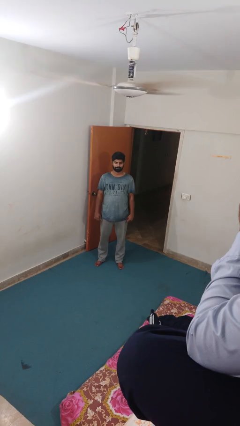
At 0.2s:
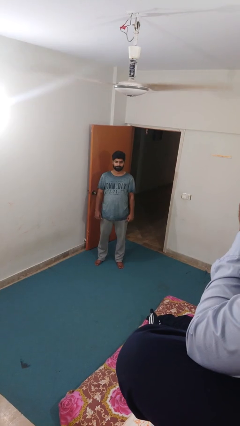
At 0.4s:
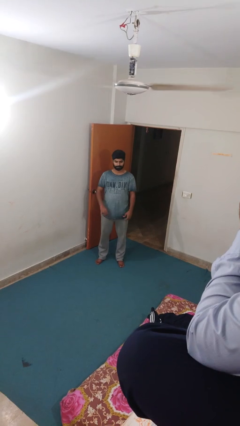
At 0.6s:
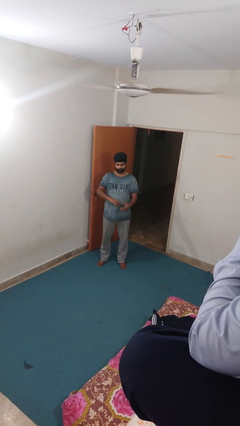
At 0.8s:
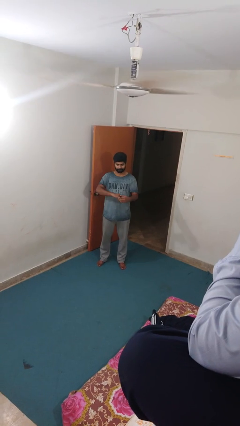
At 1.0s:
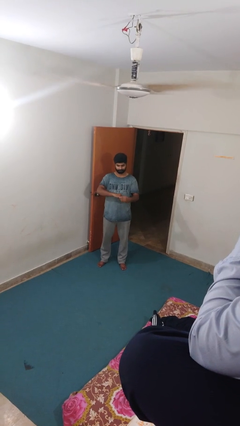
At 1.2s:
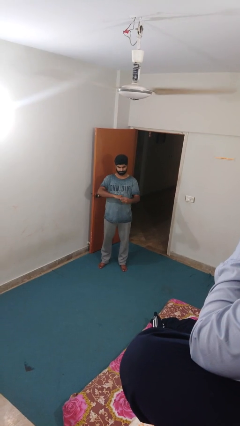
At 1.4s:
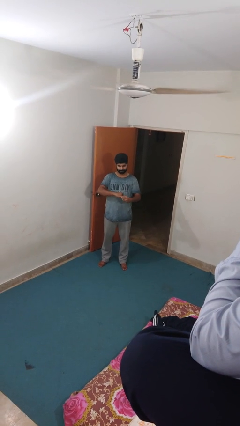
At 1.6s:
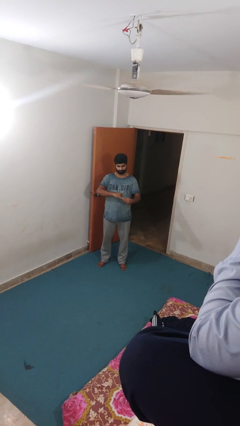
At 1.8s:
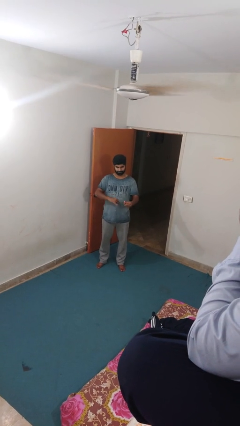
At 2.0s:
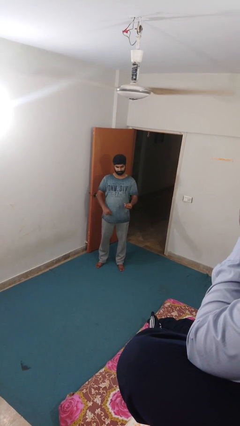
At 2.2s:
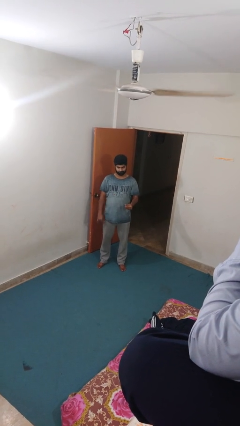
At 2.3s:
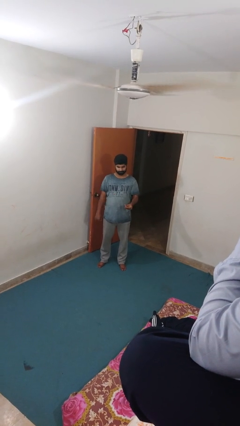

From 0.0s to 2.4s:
person takes off ring

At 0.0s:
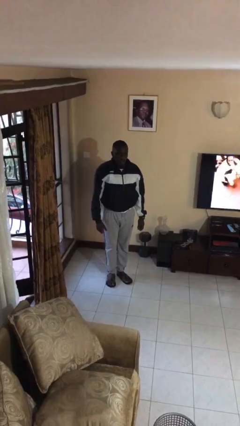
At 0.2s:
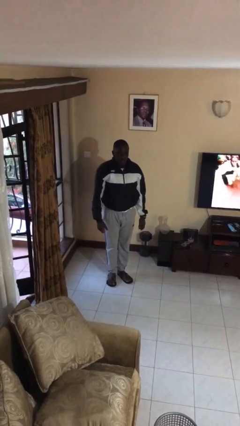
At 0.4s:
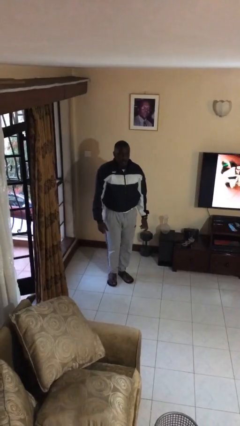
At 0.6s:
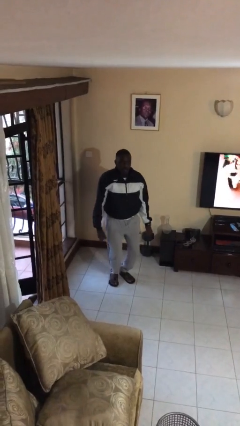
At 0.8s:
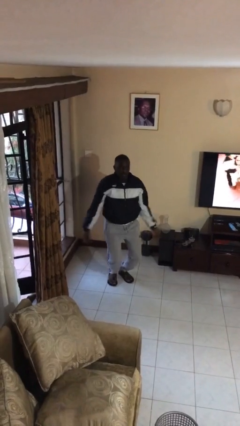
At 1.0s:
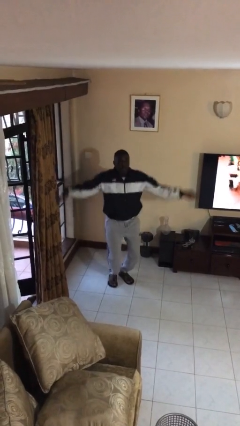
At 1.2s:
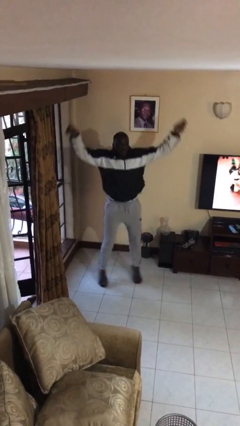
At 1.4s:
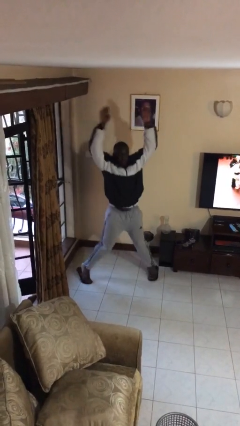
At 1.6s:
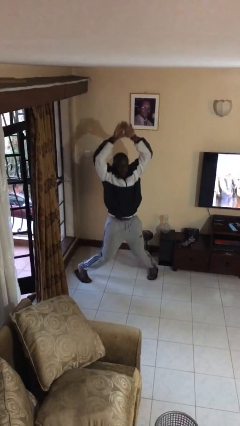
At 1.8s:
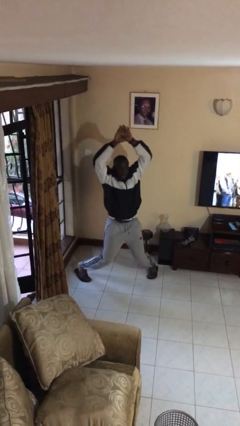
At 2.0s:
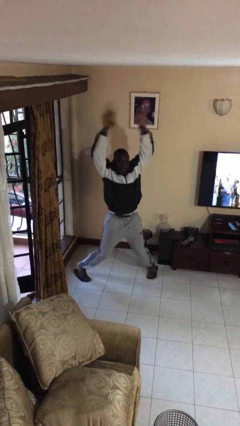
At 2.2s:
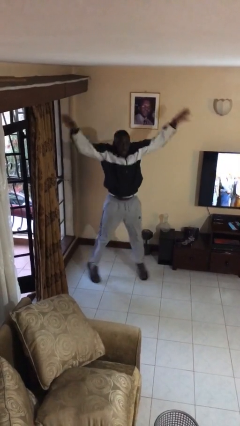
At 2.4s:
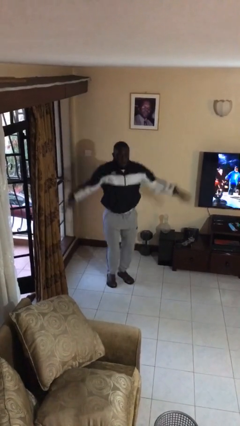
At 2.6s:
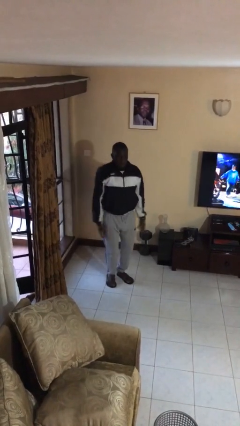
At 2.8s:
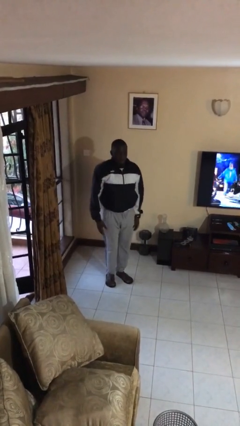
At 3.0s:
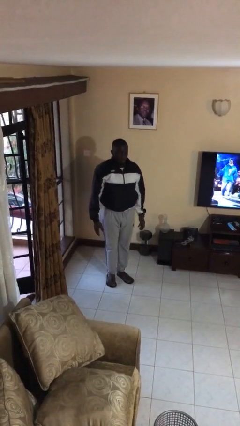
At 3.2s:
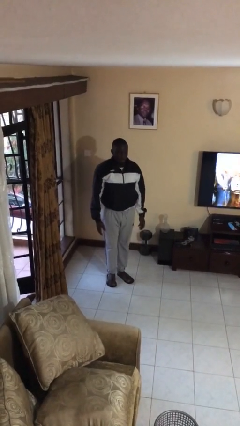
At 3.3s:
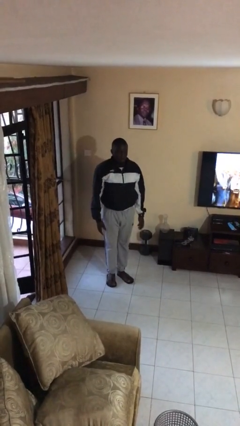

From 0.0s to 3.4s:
person exercises with jumping jacks

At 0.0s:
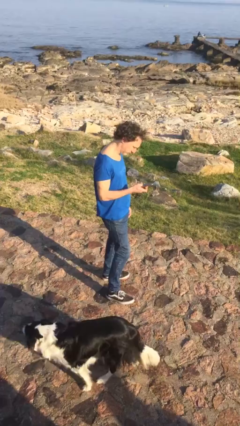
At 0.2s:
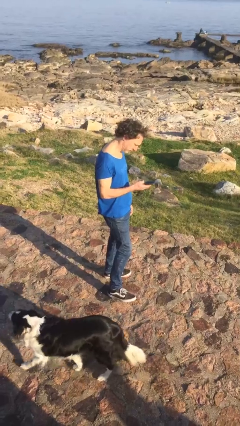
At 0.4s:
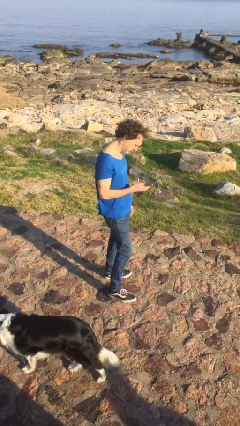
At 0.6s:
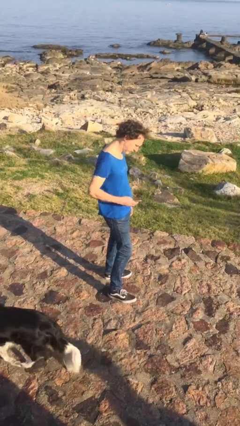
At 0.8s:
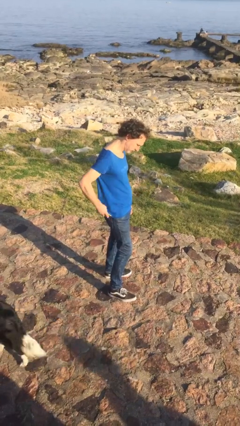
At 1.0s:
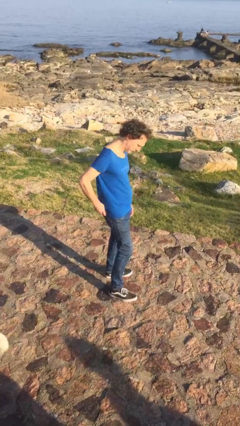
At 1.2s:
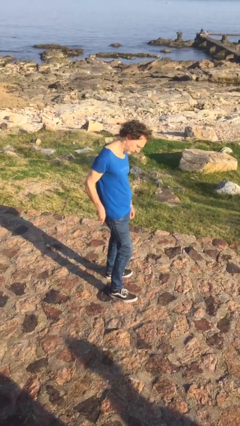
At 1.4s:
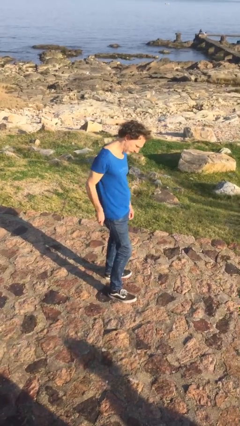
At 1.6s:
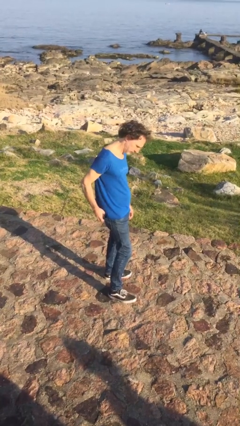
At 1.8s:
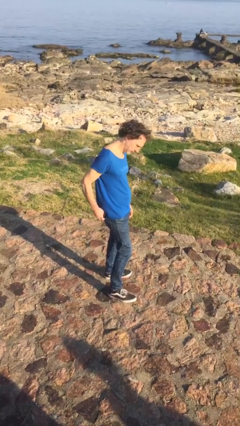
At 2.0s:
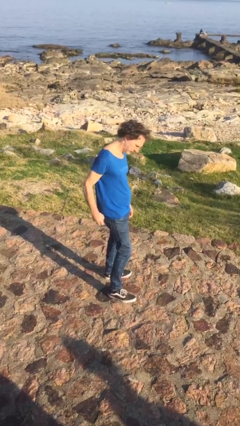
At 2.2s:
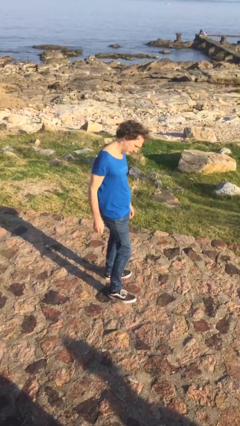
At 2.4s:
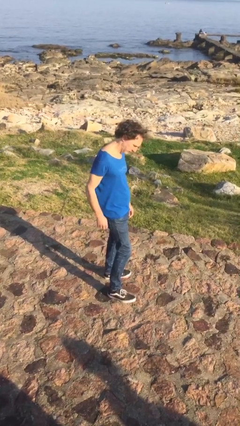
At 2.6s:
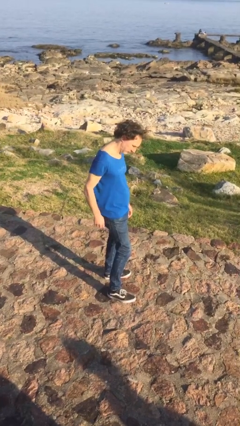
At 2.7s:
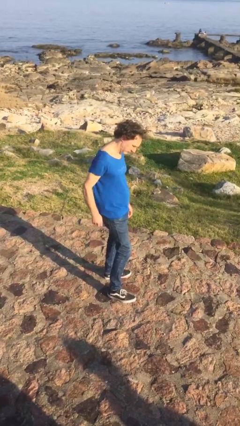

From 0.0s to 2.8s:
person puts phone into pocket

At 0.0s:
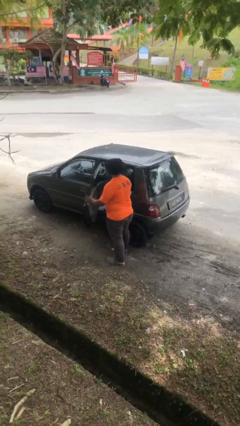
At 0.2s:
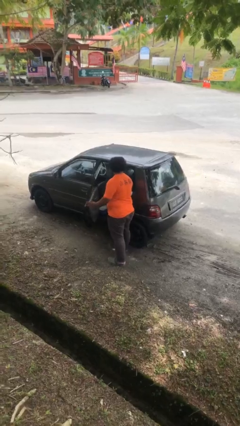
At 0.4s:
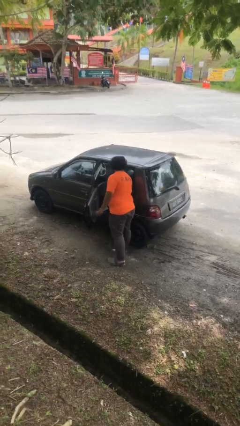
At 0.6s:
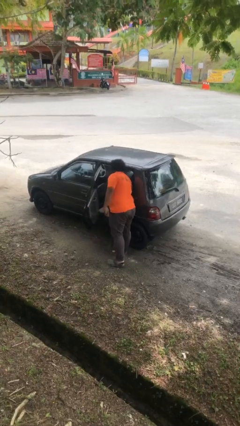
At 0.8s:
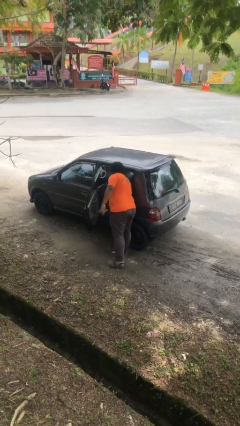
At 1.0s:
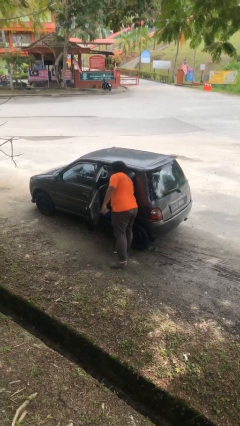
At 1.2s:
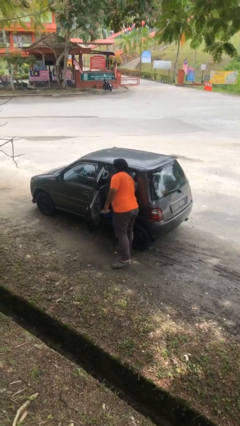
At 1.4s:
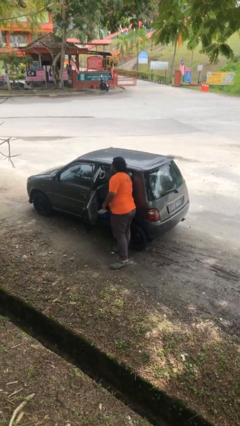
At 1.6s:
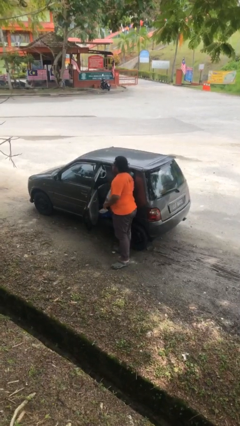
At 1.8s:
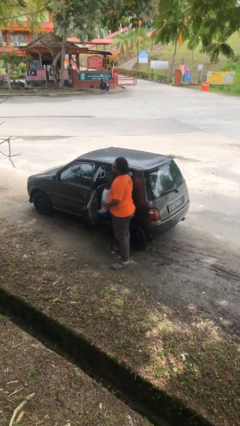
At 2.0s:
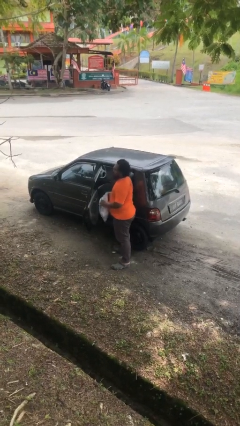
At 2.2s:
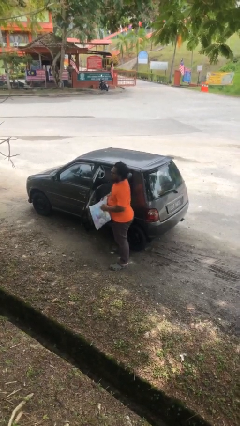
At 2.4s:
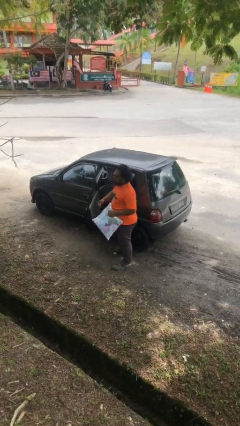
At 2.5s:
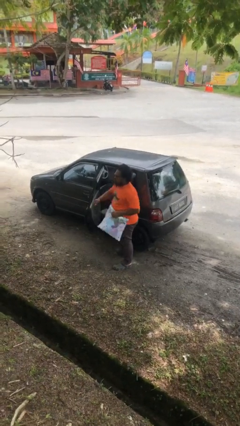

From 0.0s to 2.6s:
person unloads car

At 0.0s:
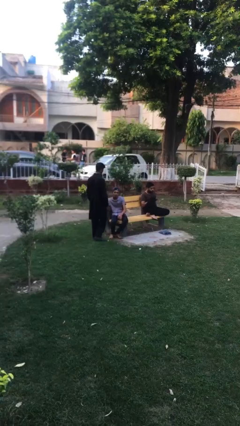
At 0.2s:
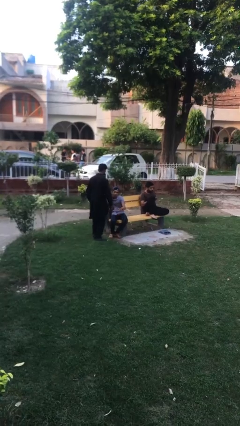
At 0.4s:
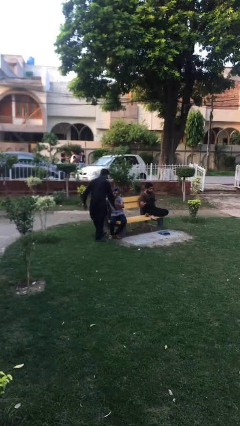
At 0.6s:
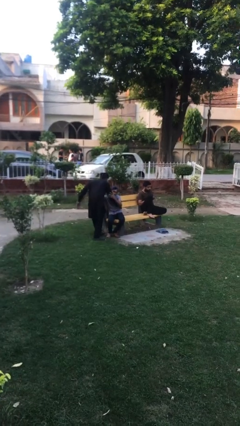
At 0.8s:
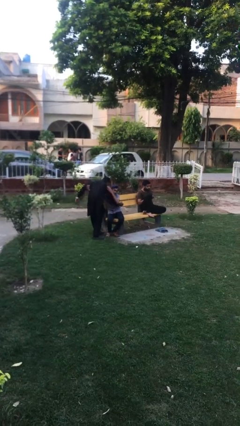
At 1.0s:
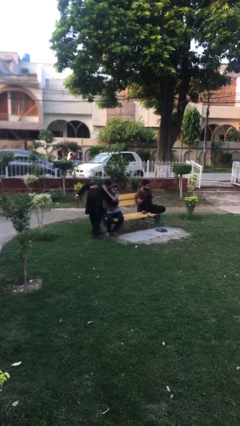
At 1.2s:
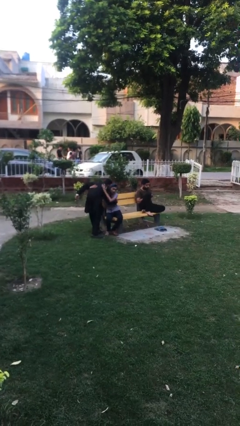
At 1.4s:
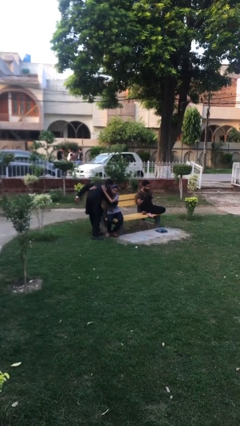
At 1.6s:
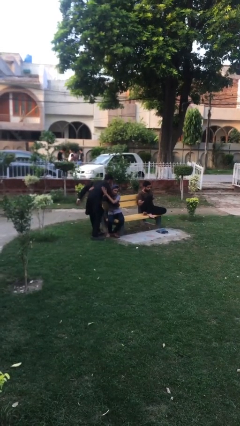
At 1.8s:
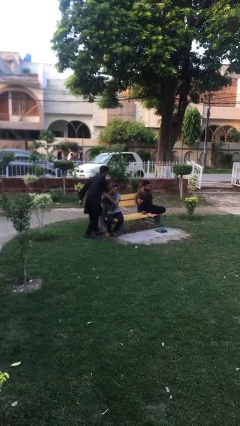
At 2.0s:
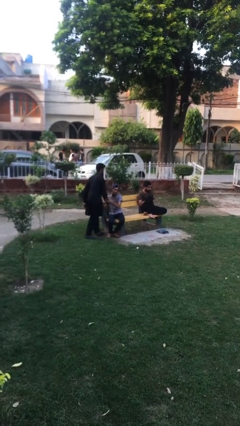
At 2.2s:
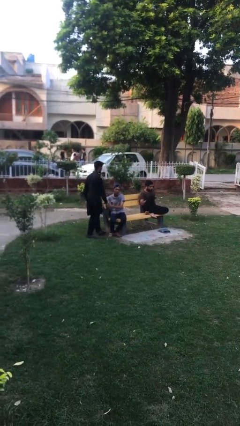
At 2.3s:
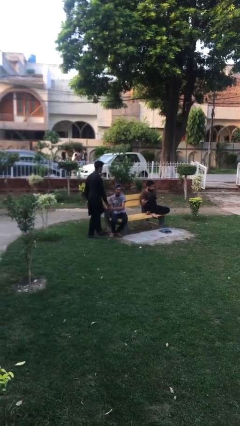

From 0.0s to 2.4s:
person embraces person

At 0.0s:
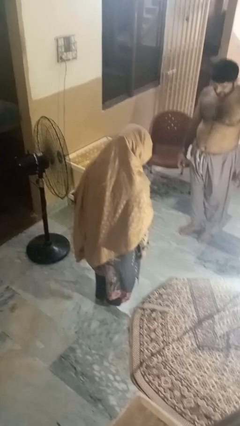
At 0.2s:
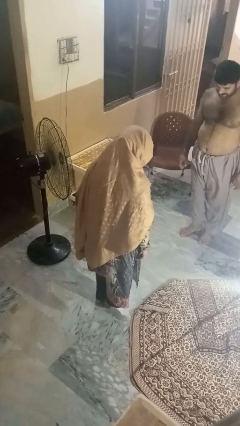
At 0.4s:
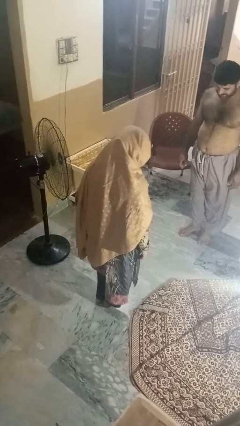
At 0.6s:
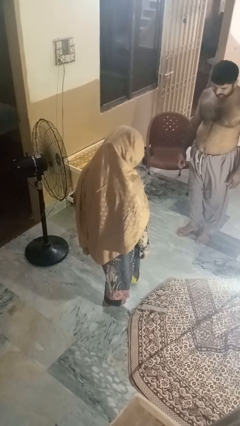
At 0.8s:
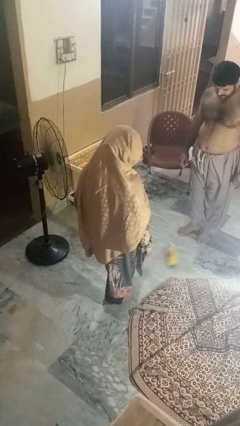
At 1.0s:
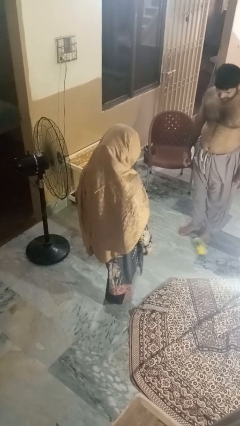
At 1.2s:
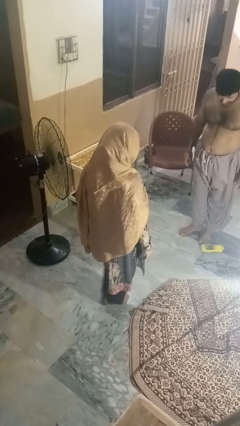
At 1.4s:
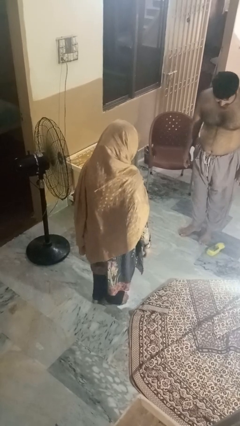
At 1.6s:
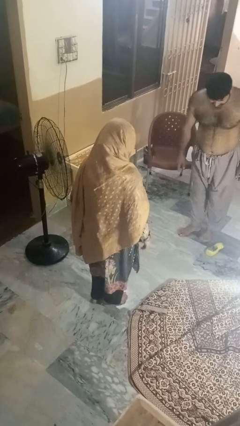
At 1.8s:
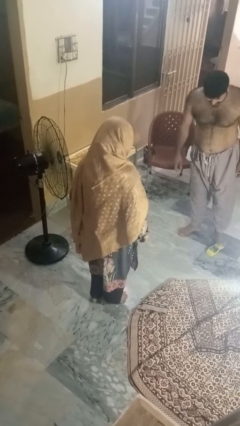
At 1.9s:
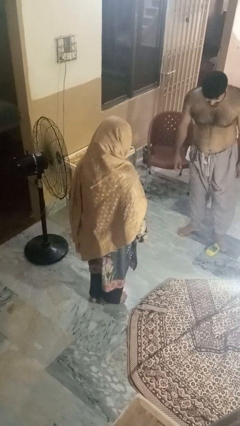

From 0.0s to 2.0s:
person kicks object to person

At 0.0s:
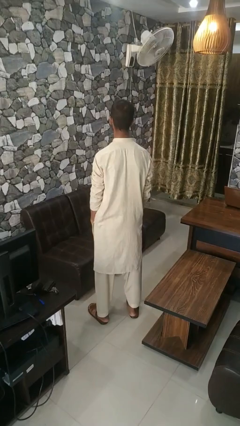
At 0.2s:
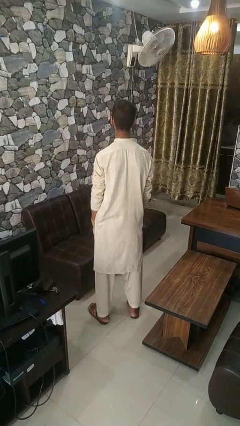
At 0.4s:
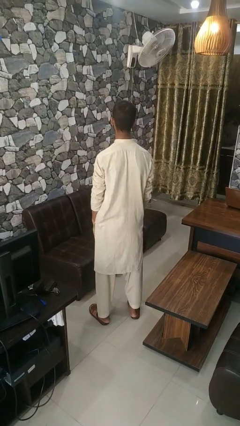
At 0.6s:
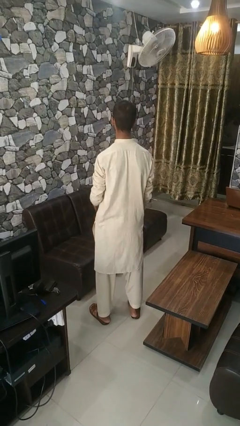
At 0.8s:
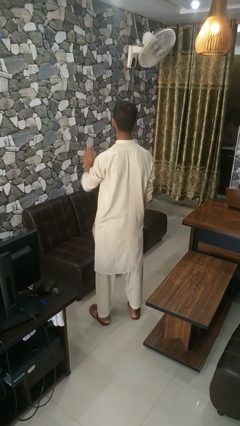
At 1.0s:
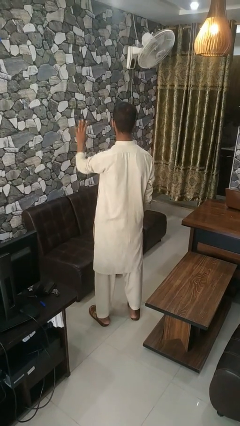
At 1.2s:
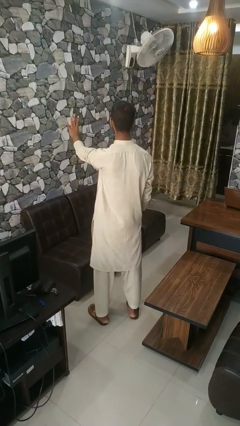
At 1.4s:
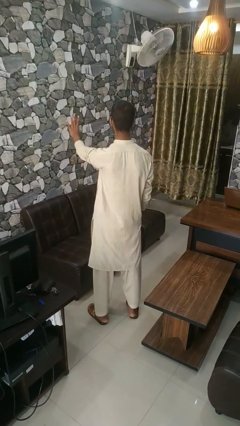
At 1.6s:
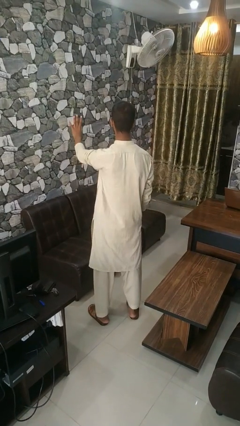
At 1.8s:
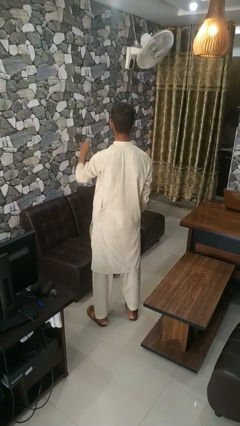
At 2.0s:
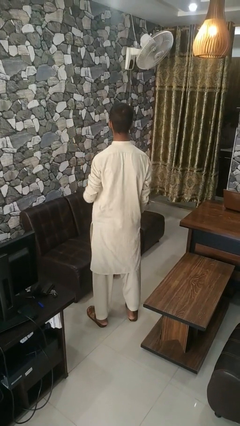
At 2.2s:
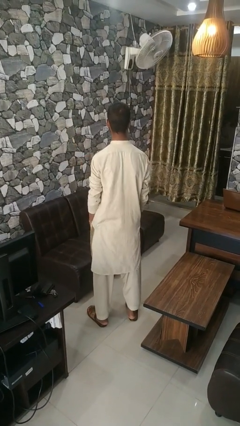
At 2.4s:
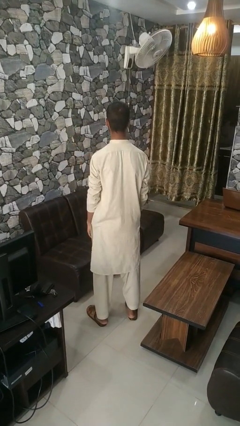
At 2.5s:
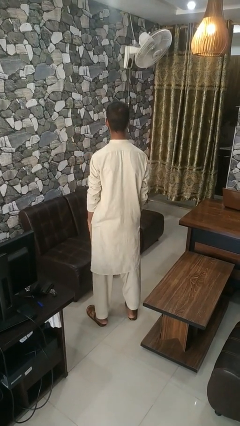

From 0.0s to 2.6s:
person gestures number four
